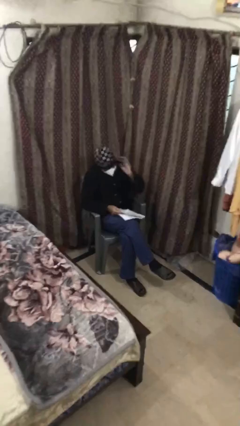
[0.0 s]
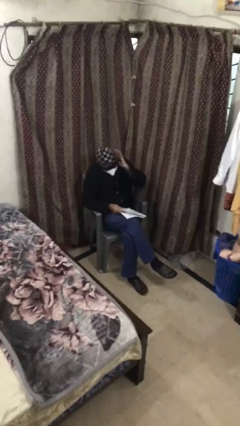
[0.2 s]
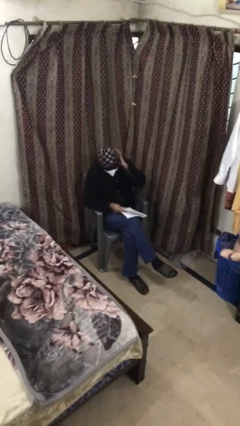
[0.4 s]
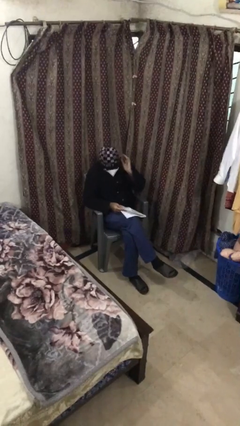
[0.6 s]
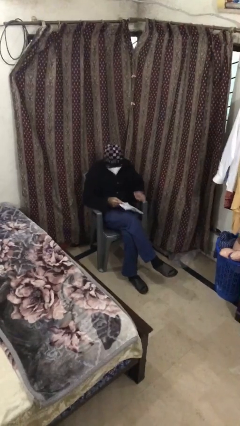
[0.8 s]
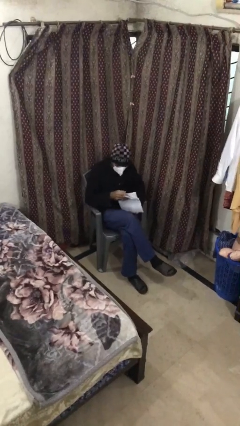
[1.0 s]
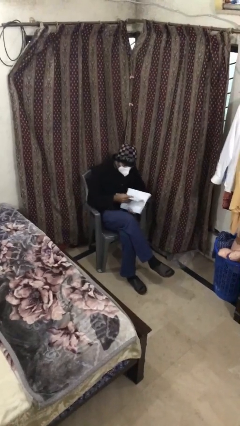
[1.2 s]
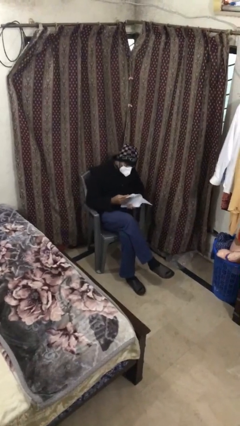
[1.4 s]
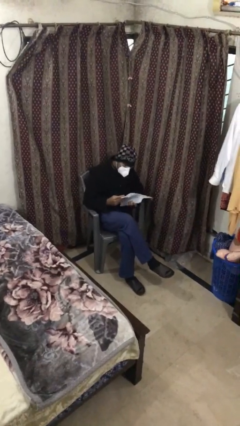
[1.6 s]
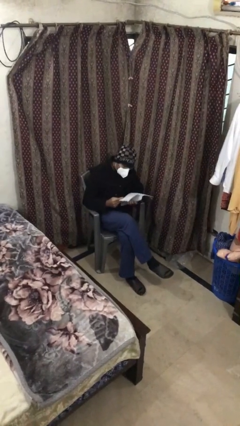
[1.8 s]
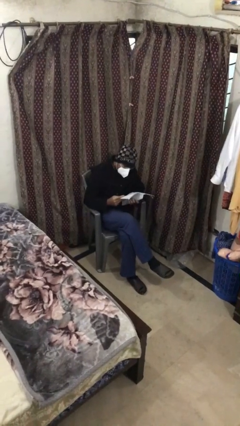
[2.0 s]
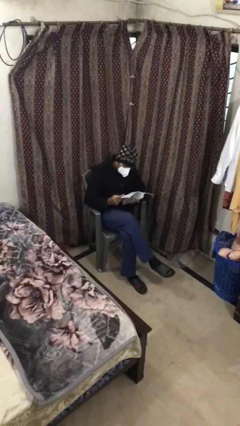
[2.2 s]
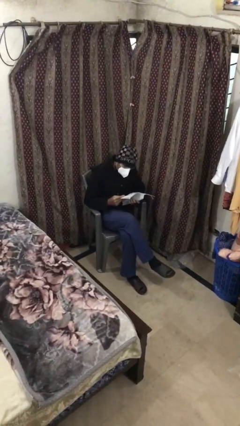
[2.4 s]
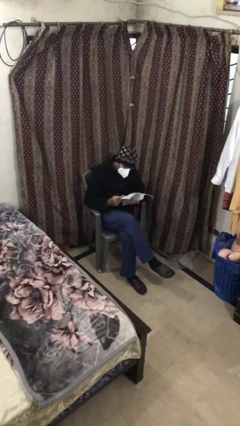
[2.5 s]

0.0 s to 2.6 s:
person reads document

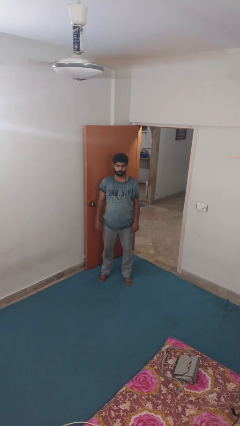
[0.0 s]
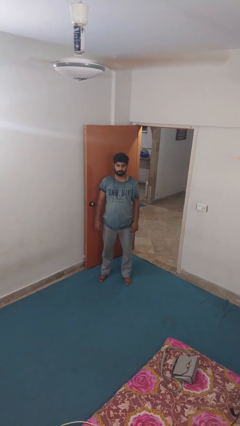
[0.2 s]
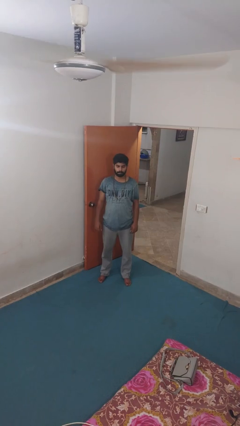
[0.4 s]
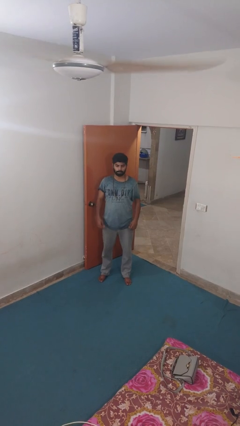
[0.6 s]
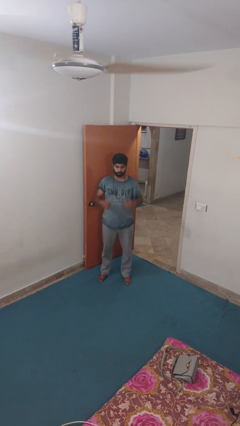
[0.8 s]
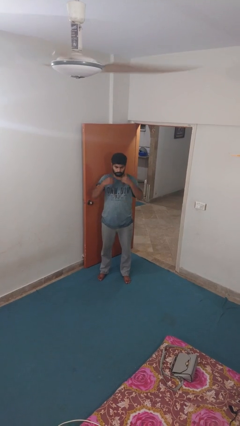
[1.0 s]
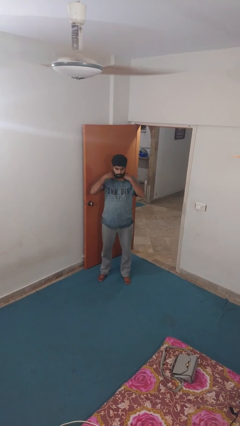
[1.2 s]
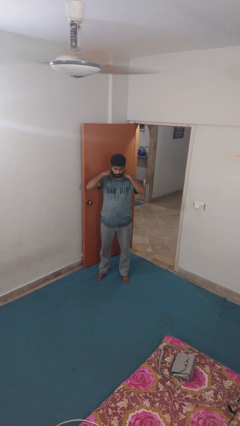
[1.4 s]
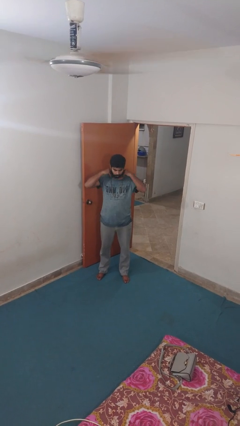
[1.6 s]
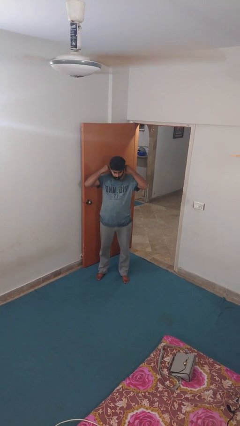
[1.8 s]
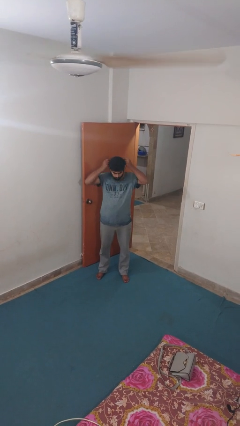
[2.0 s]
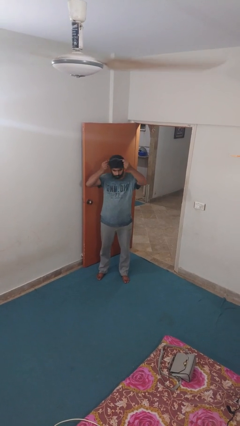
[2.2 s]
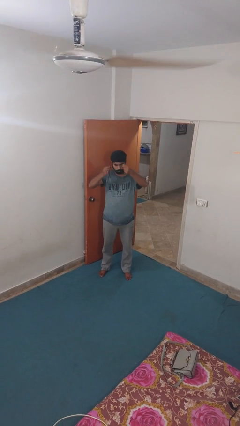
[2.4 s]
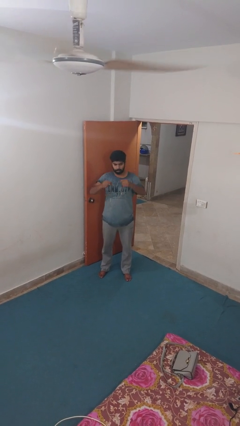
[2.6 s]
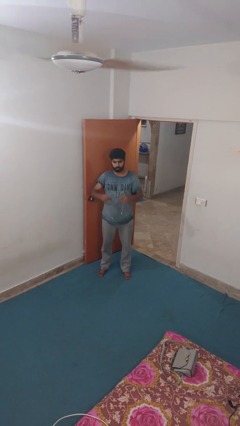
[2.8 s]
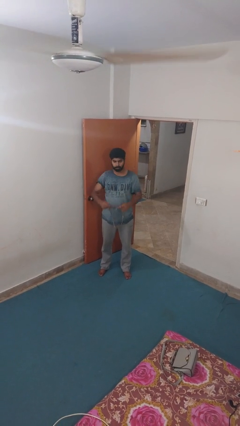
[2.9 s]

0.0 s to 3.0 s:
person takes off necklace

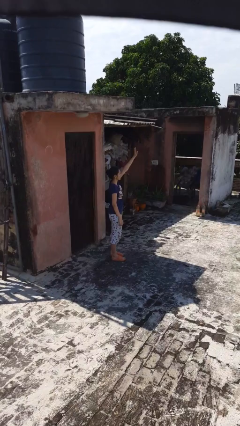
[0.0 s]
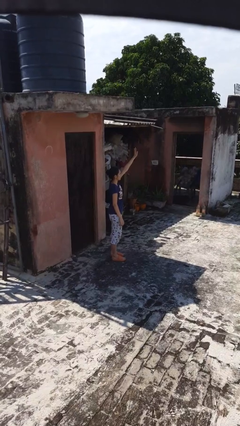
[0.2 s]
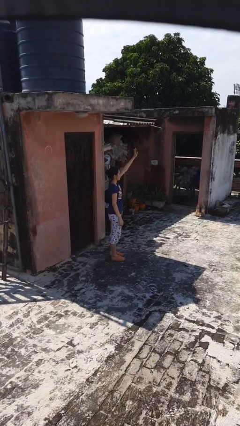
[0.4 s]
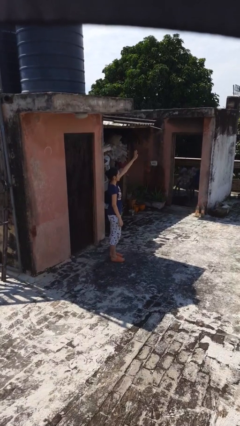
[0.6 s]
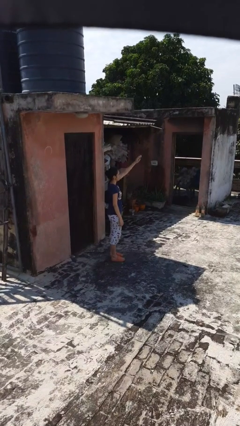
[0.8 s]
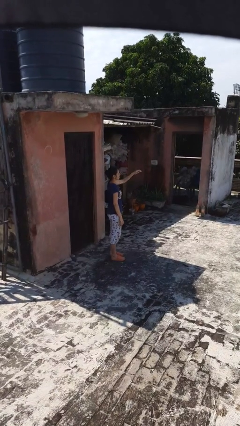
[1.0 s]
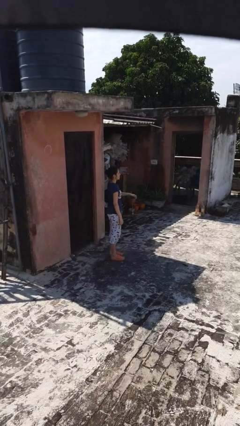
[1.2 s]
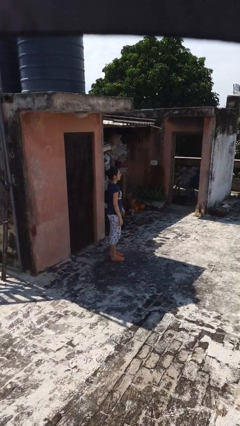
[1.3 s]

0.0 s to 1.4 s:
person gestures raise hand

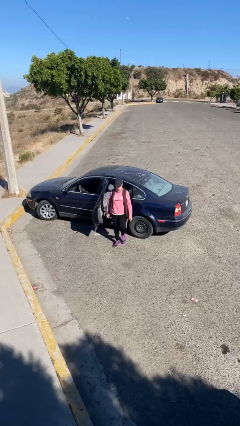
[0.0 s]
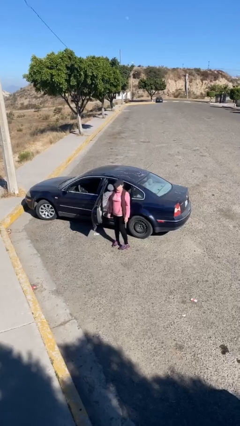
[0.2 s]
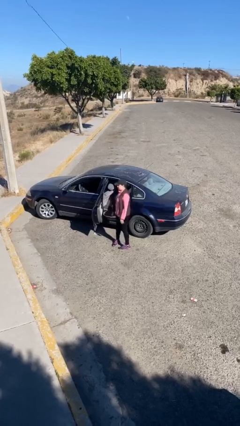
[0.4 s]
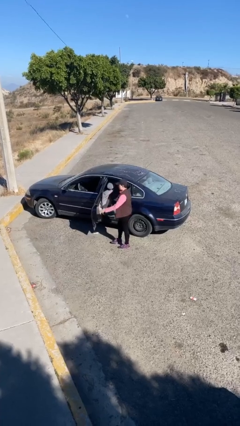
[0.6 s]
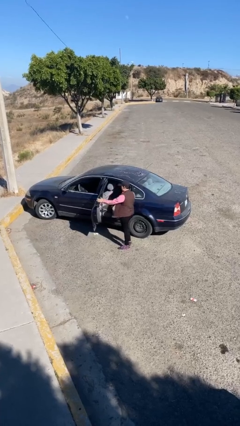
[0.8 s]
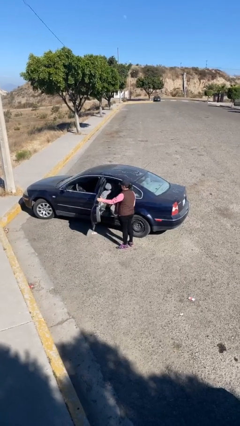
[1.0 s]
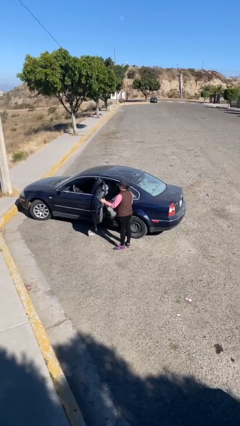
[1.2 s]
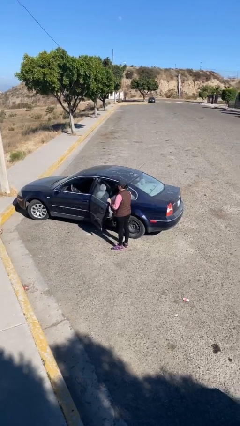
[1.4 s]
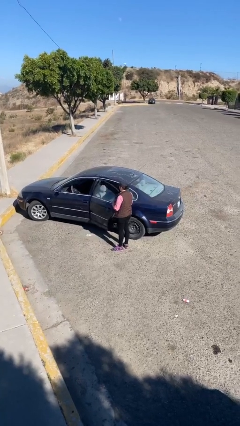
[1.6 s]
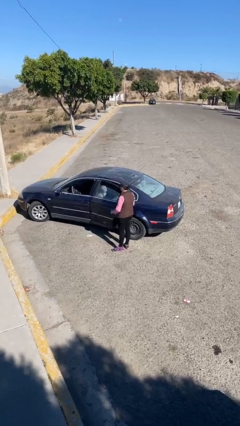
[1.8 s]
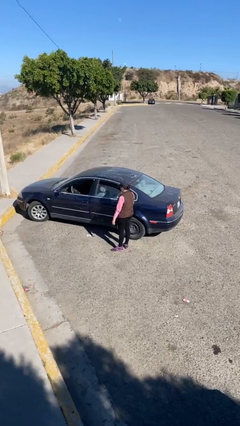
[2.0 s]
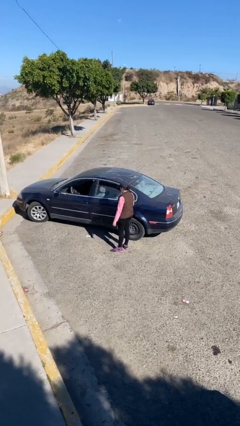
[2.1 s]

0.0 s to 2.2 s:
person closes car door

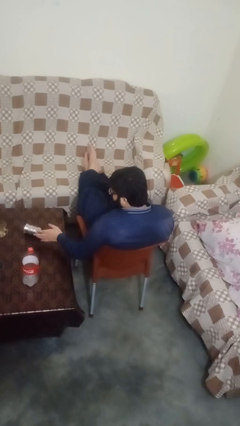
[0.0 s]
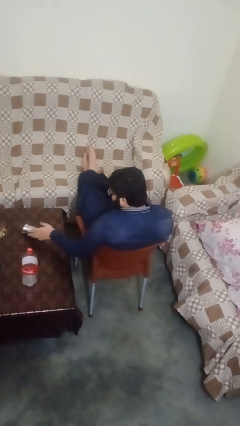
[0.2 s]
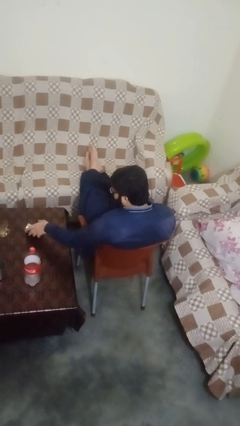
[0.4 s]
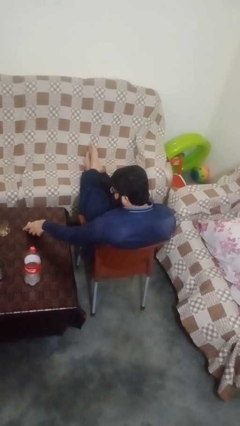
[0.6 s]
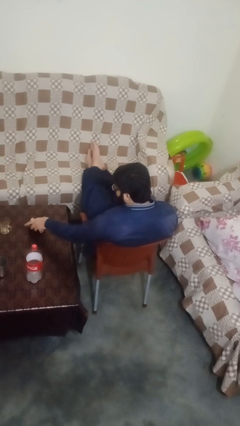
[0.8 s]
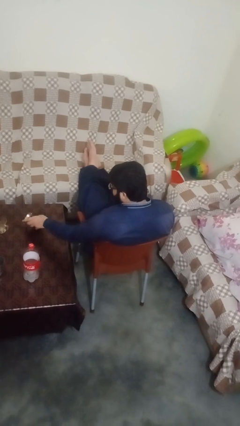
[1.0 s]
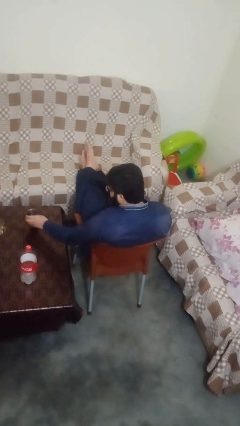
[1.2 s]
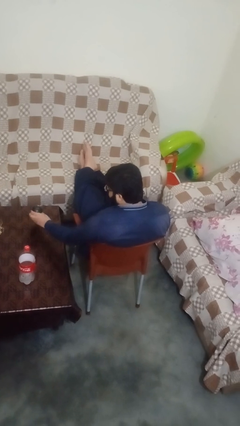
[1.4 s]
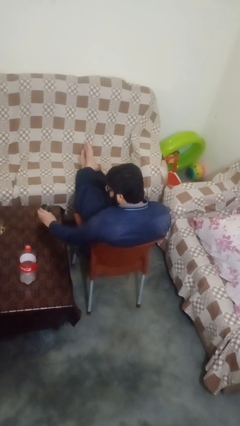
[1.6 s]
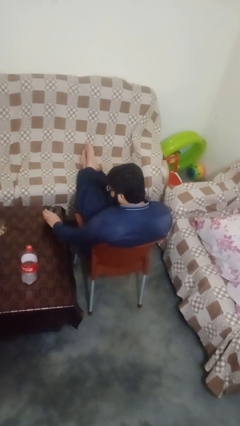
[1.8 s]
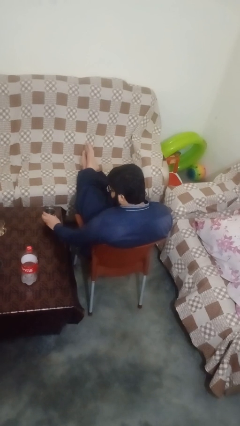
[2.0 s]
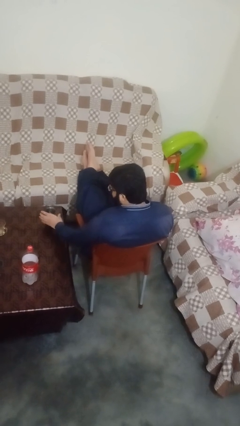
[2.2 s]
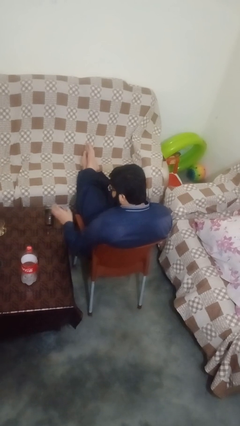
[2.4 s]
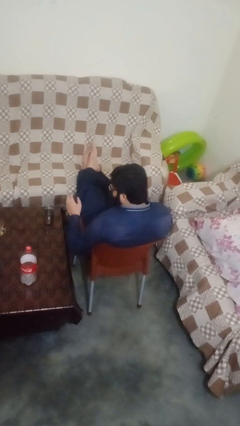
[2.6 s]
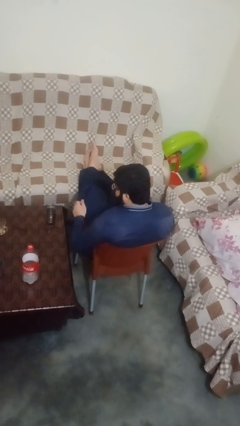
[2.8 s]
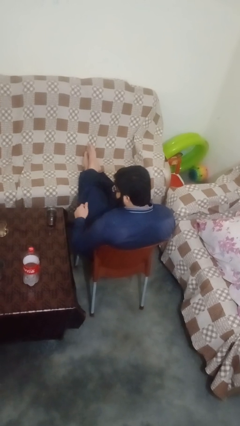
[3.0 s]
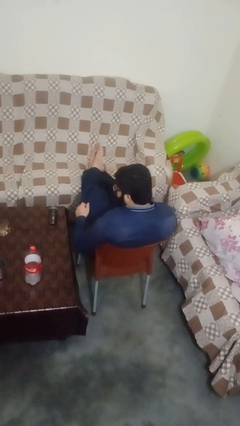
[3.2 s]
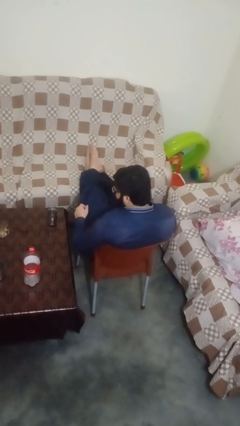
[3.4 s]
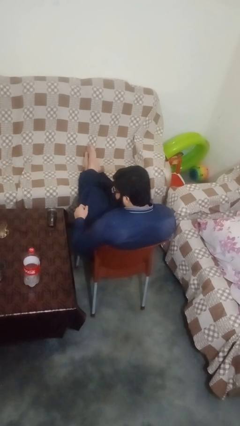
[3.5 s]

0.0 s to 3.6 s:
person sets upright glass

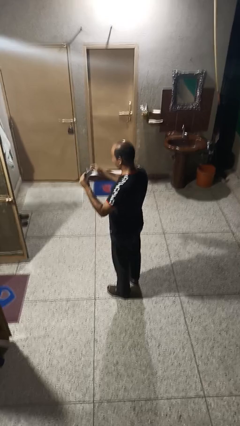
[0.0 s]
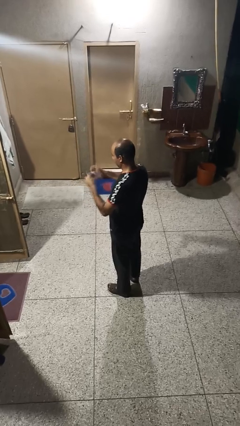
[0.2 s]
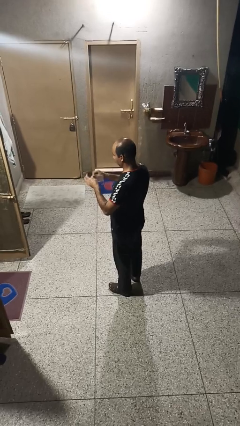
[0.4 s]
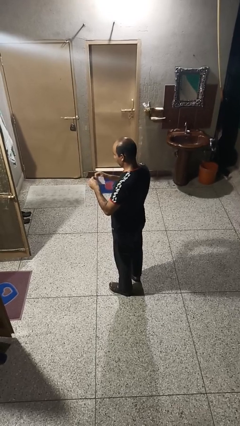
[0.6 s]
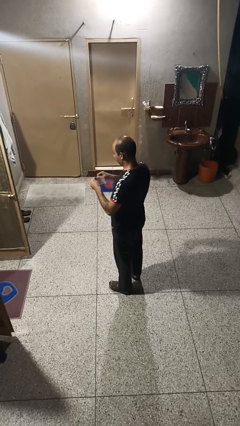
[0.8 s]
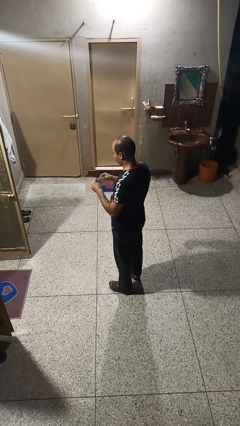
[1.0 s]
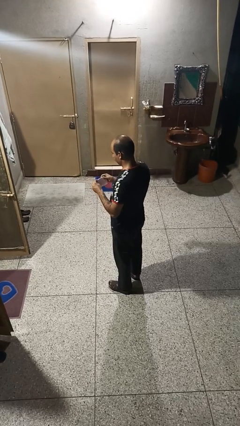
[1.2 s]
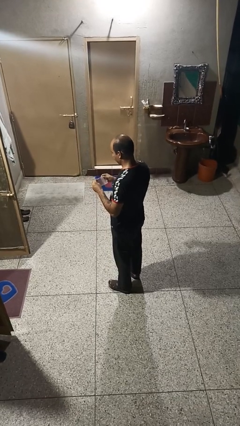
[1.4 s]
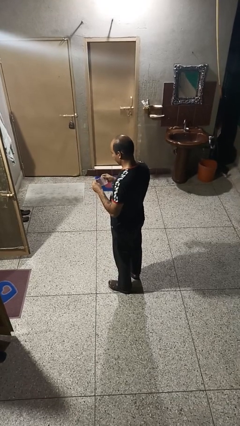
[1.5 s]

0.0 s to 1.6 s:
person tears paper

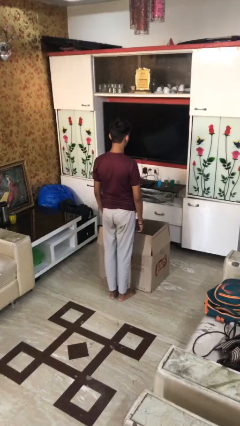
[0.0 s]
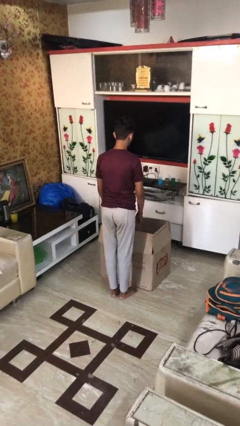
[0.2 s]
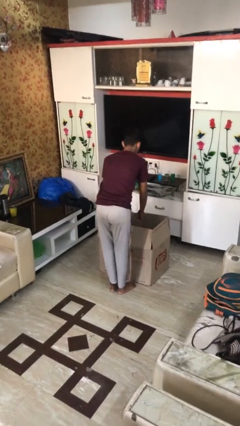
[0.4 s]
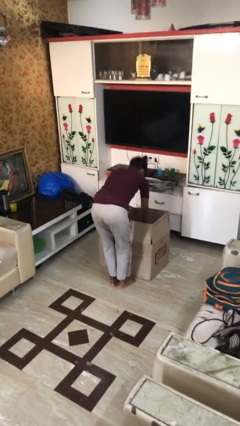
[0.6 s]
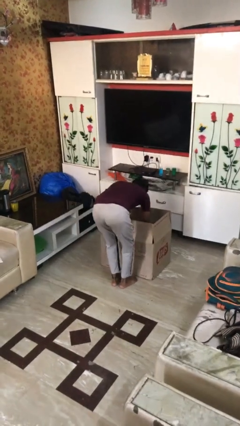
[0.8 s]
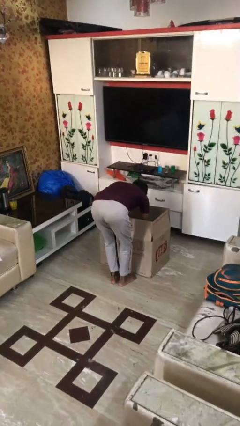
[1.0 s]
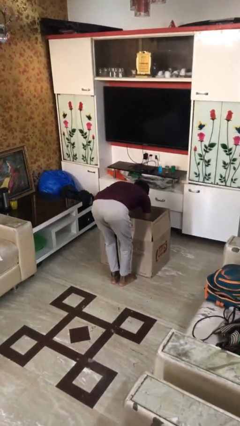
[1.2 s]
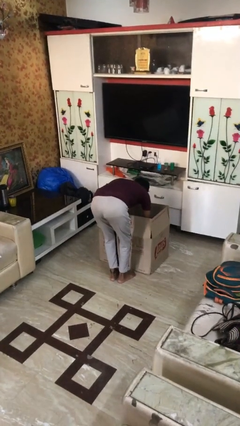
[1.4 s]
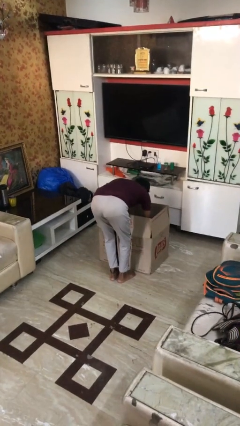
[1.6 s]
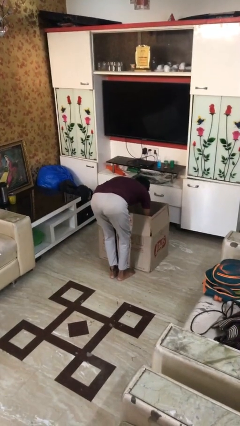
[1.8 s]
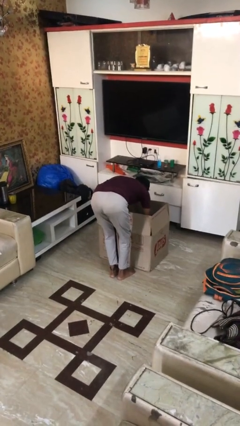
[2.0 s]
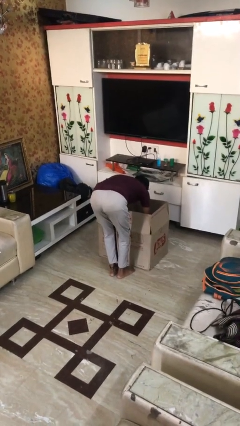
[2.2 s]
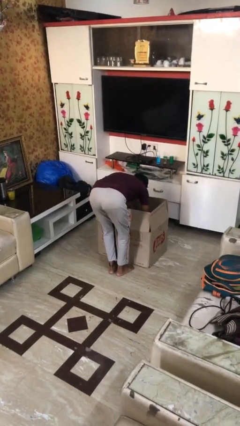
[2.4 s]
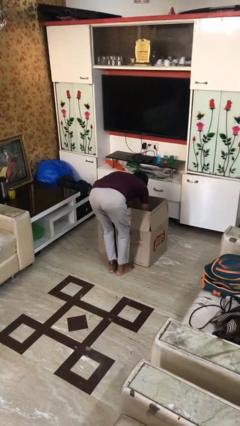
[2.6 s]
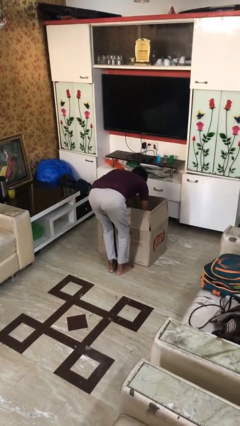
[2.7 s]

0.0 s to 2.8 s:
person searches in box

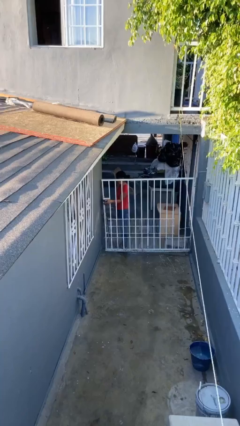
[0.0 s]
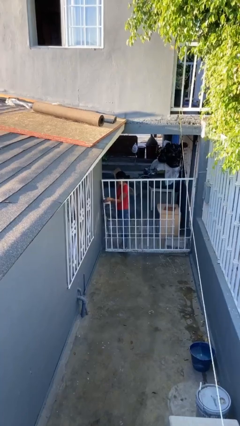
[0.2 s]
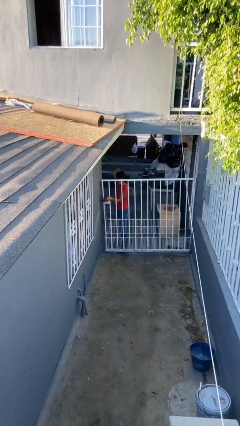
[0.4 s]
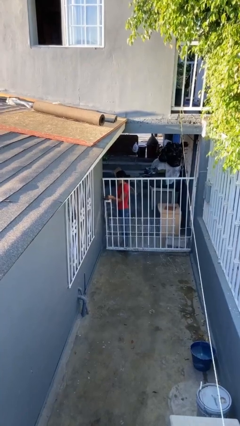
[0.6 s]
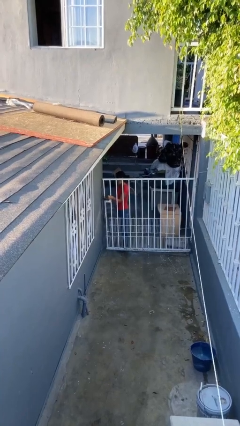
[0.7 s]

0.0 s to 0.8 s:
person closes facility door
